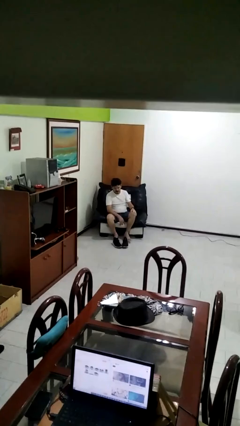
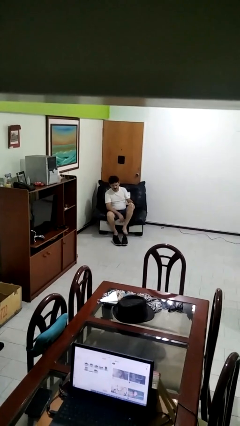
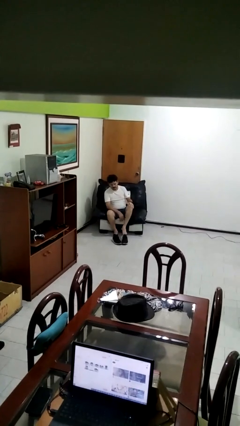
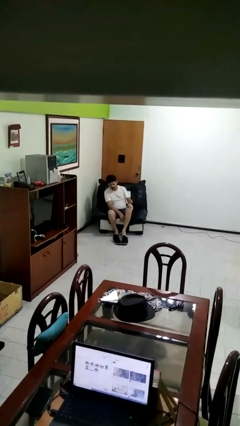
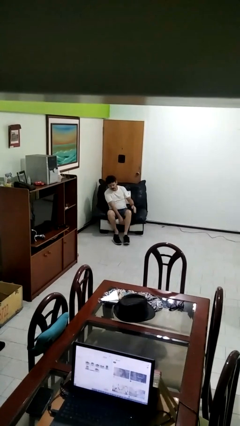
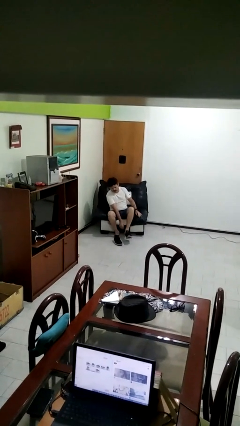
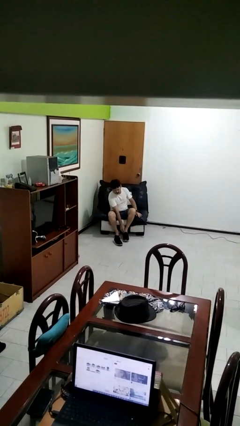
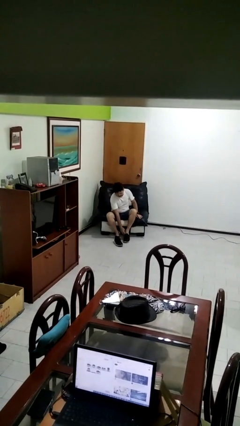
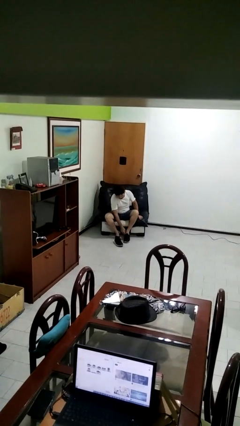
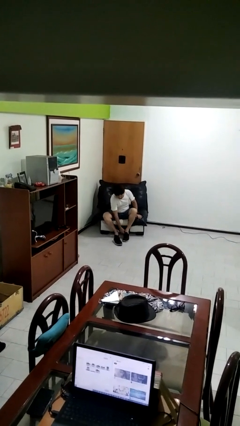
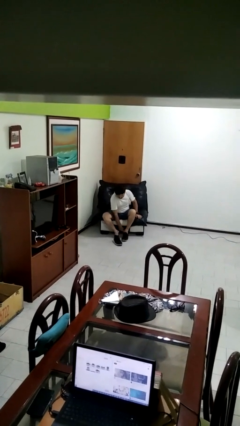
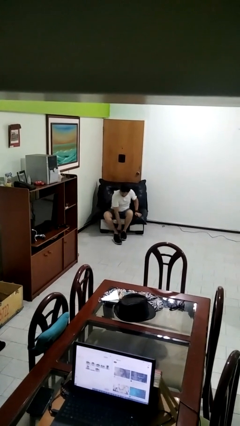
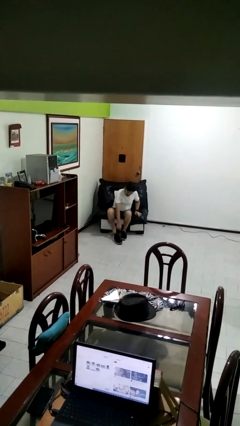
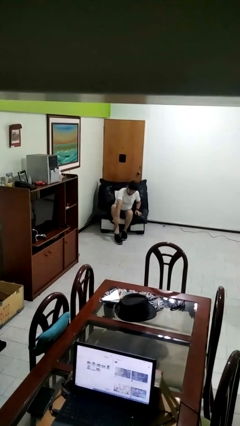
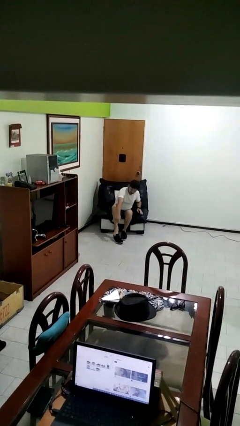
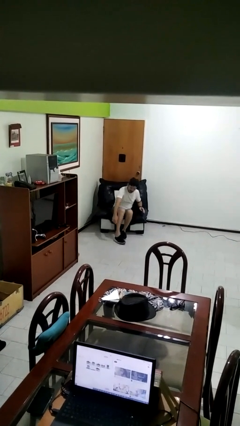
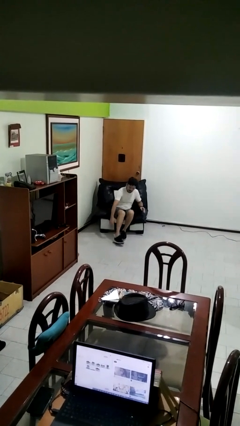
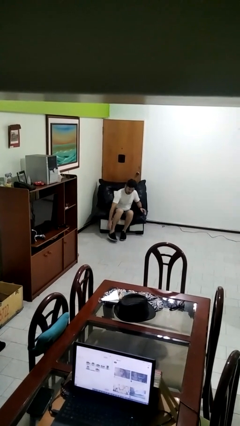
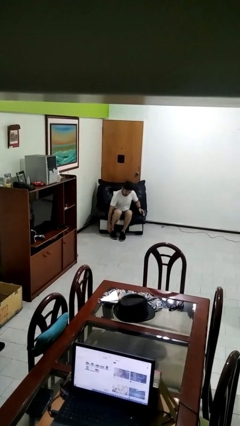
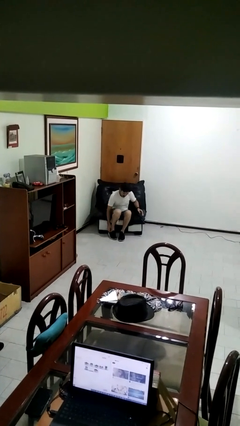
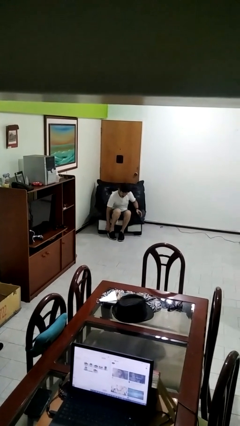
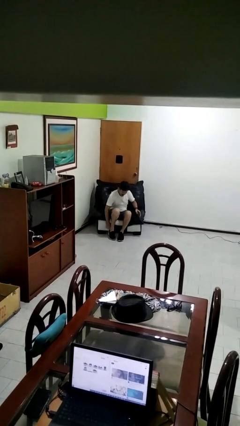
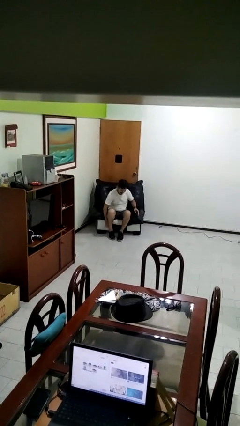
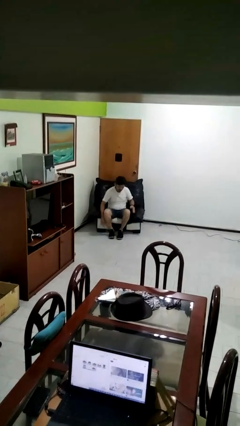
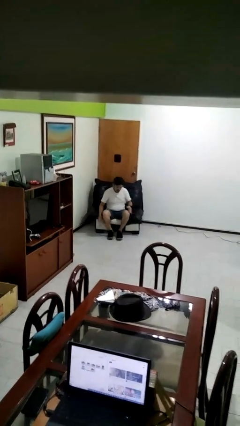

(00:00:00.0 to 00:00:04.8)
person puts on shoes

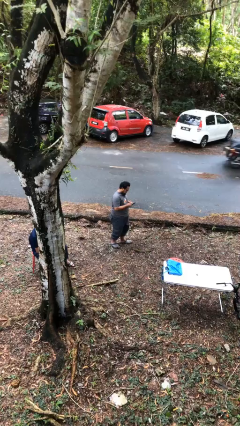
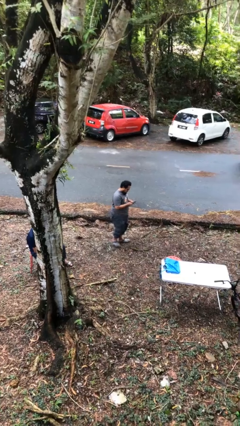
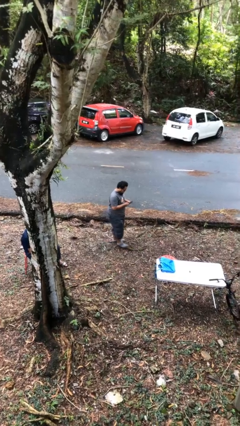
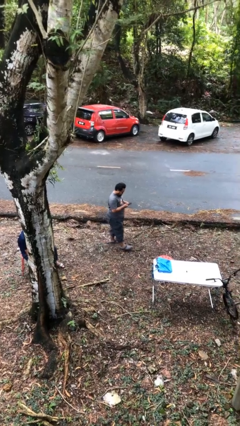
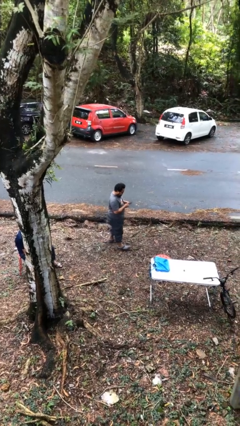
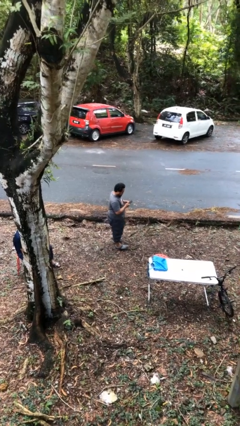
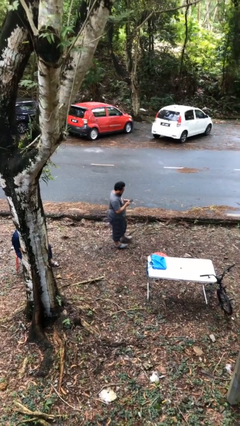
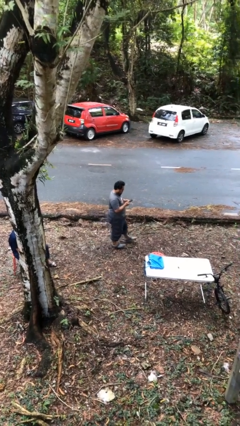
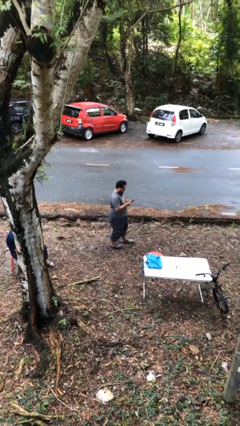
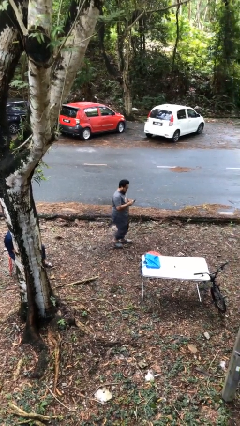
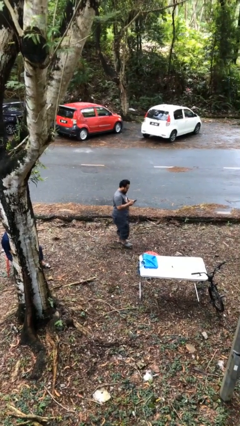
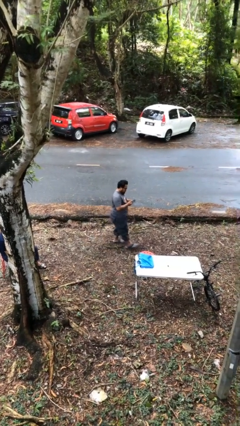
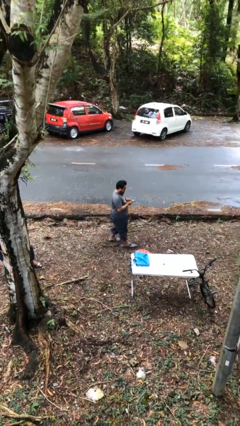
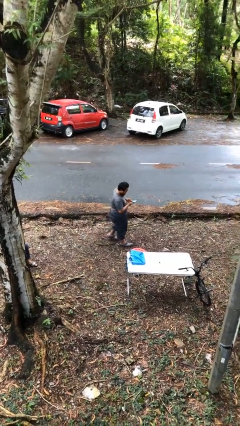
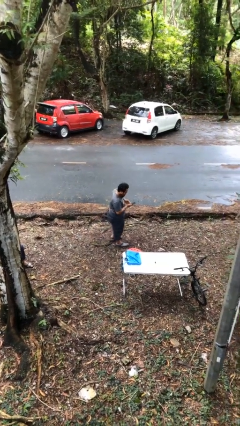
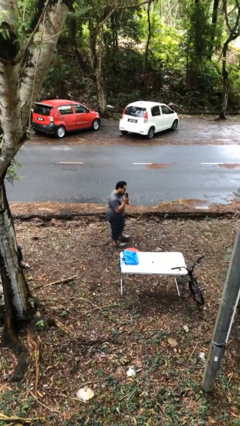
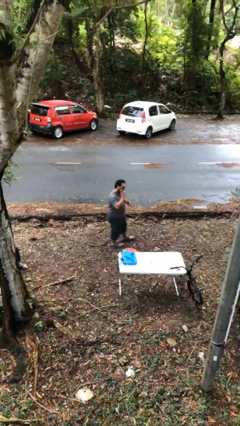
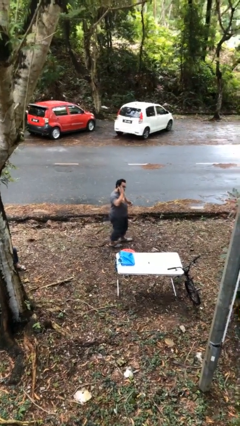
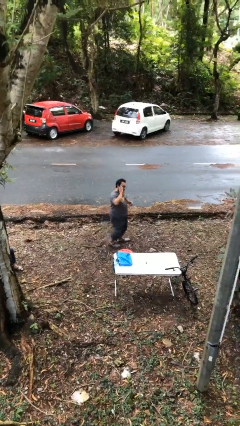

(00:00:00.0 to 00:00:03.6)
person texts on phone

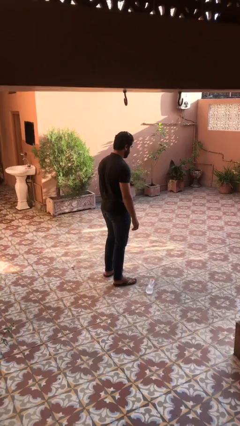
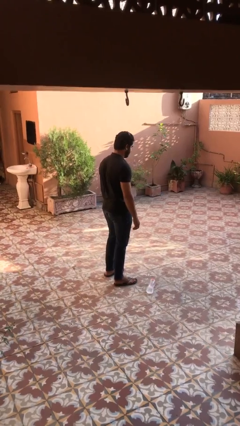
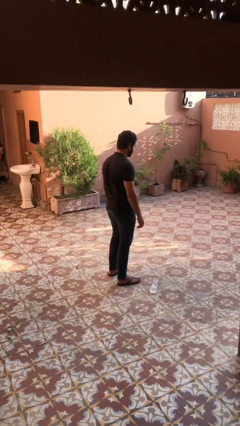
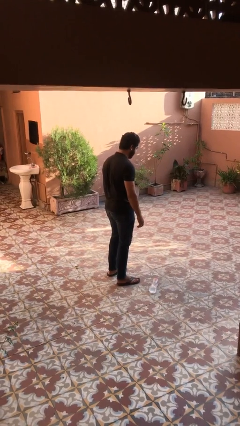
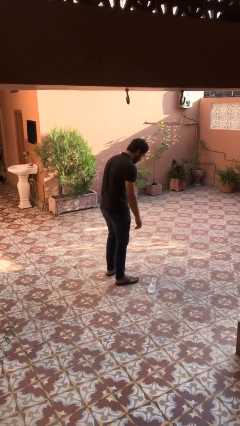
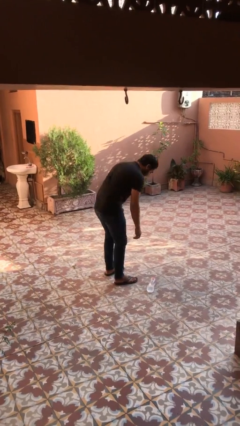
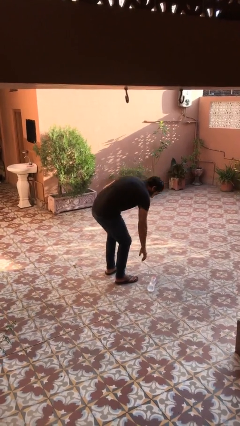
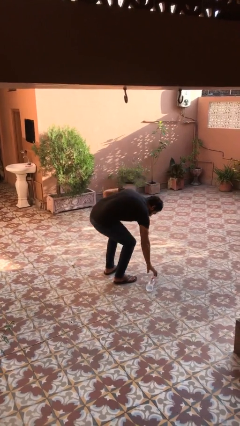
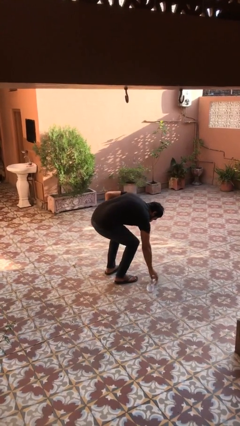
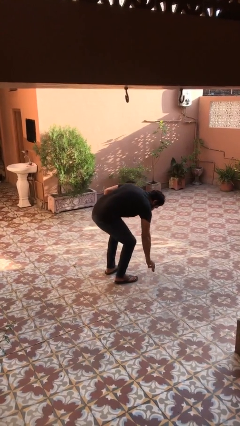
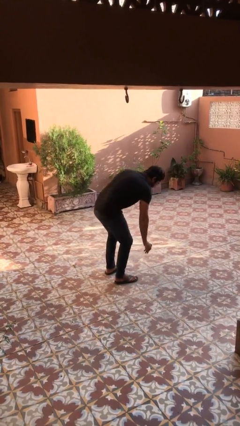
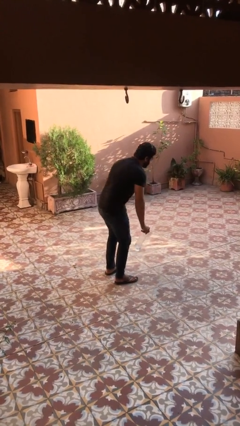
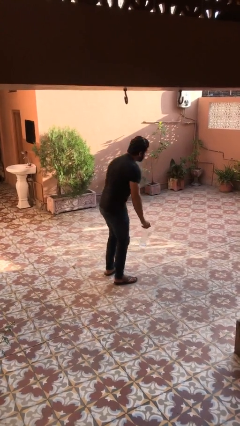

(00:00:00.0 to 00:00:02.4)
person picks up object from floor

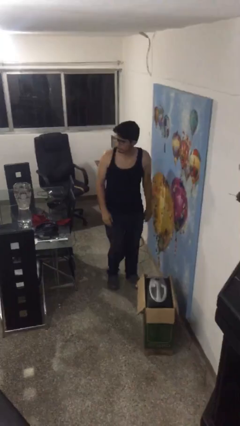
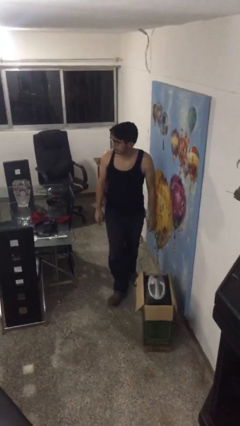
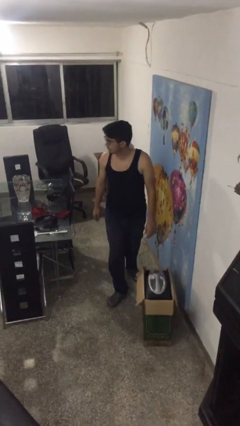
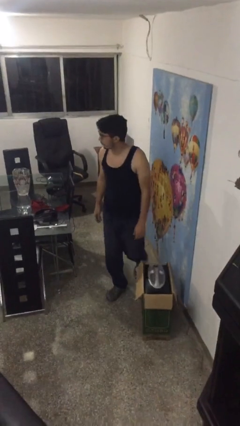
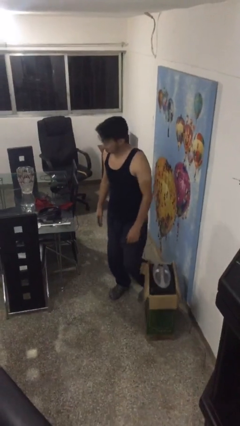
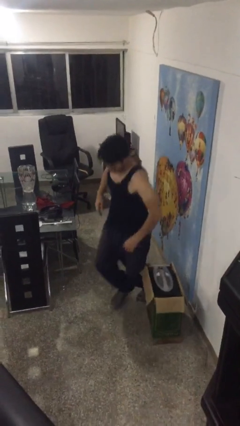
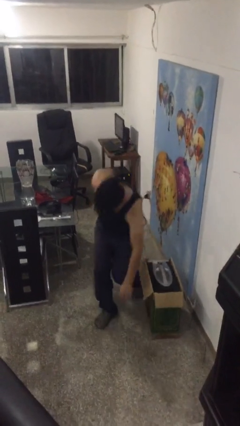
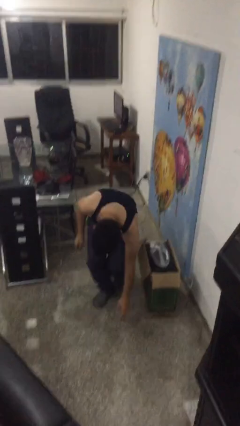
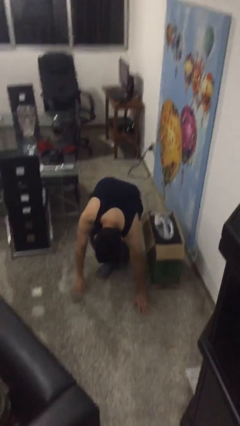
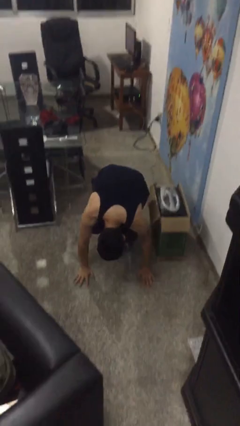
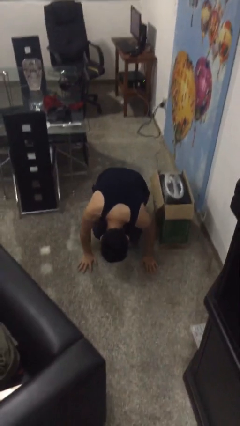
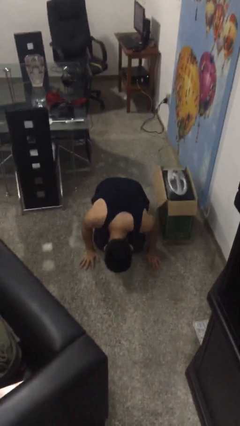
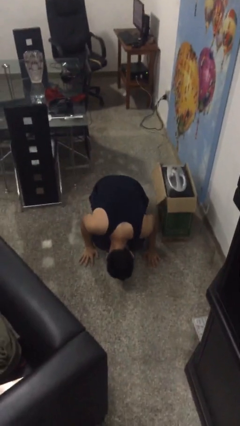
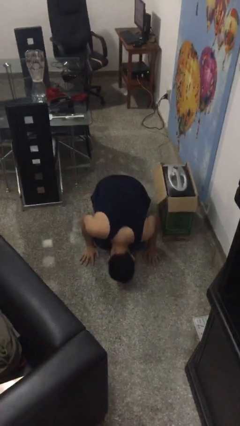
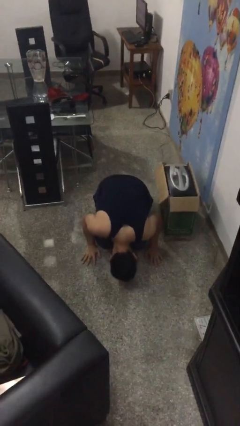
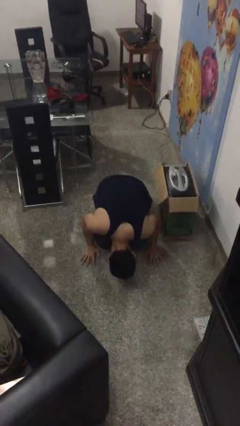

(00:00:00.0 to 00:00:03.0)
person trips on object on floor

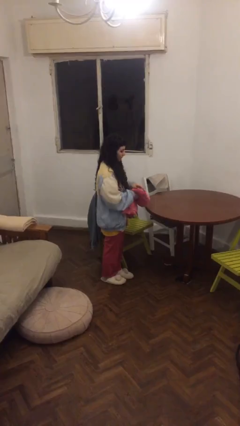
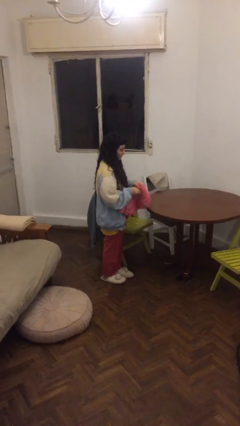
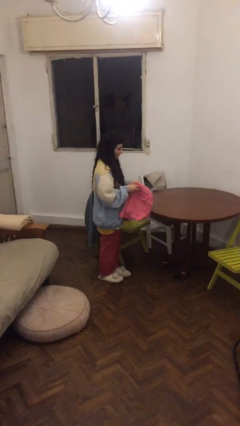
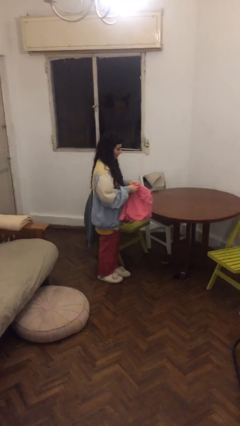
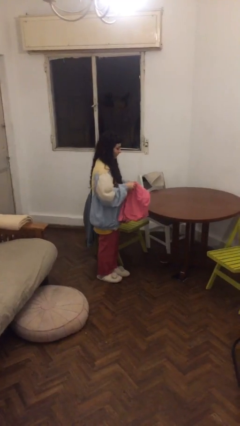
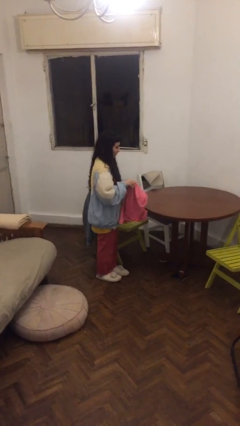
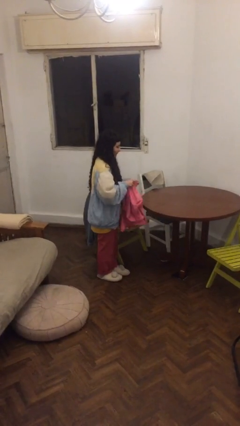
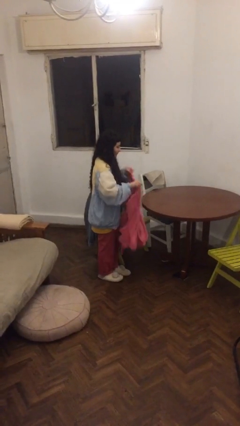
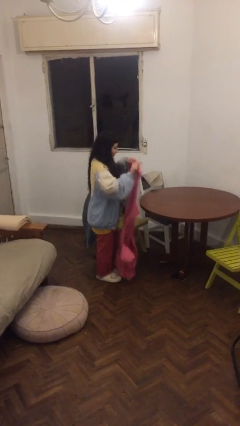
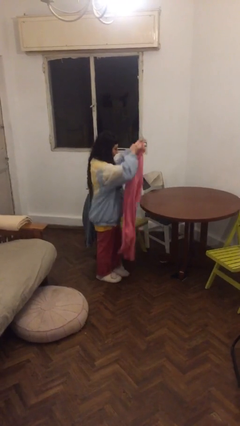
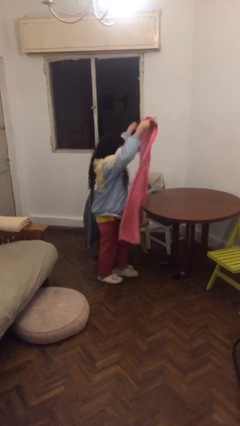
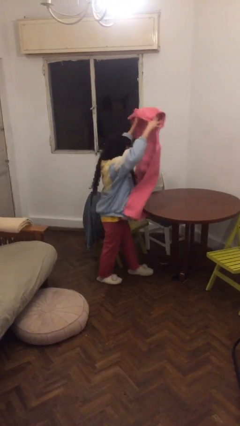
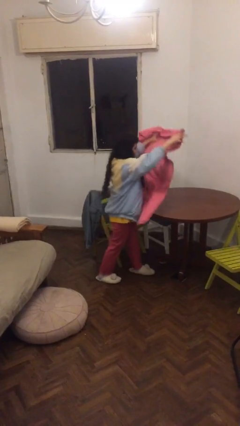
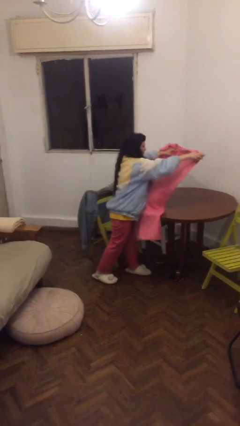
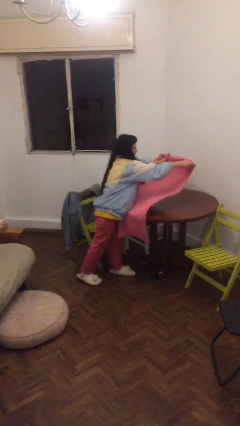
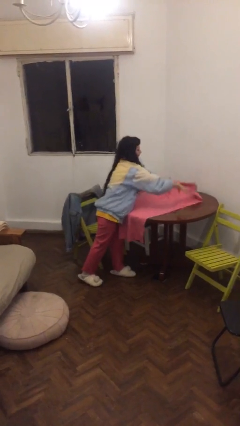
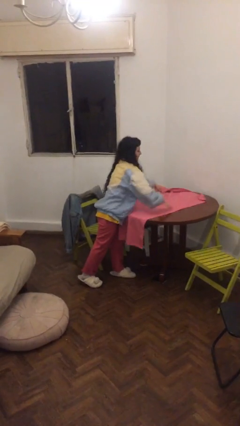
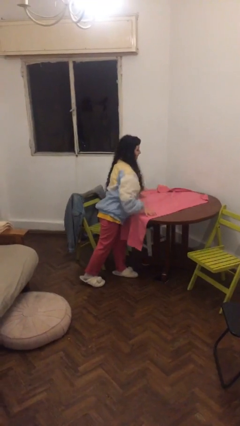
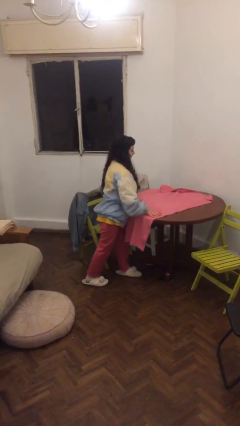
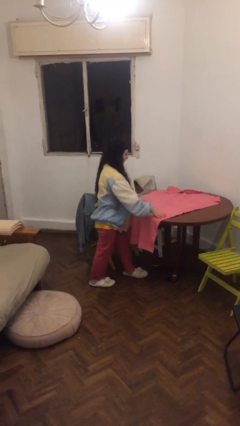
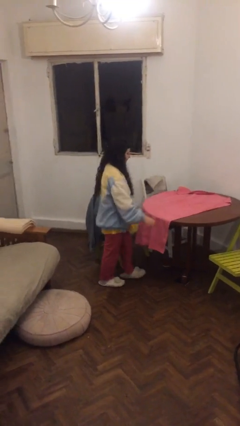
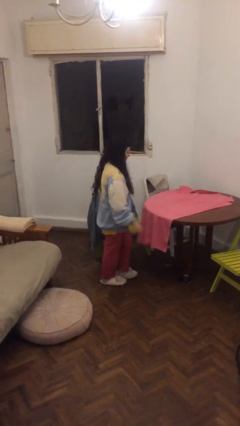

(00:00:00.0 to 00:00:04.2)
person spreads tablecloth
